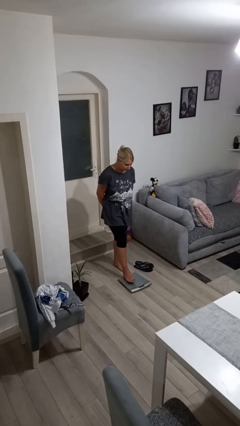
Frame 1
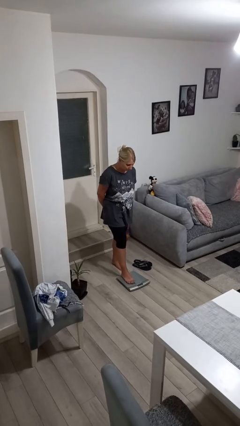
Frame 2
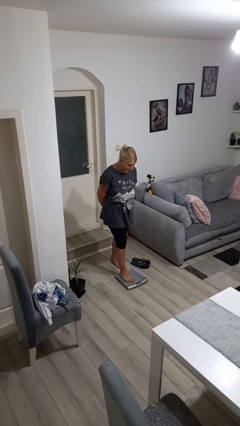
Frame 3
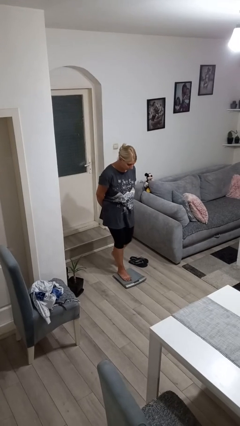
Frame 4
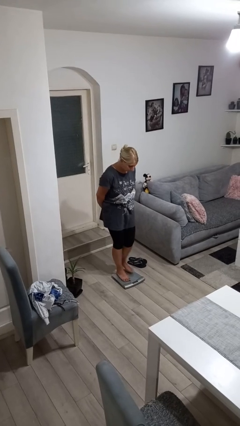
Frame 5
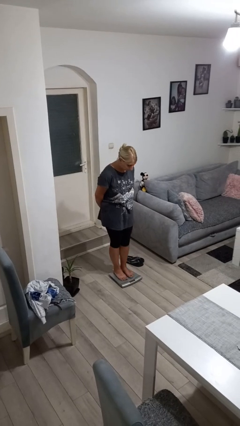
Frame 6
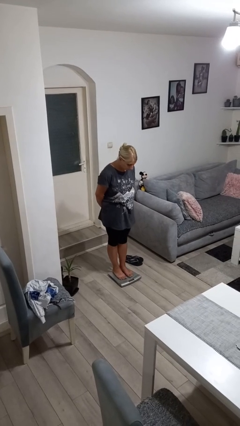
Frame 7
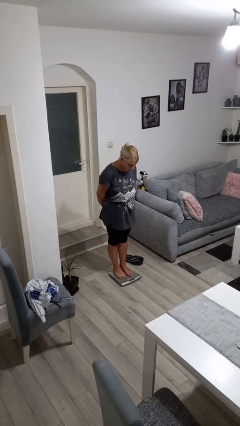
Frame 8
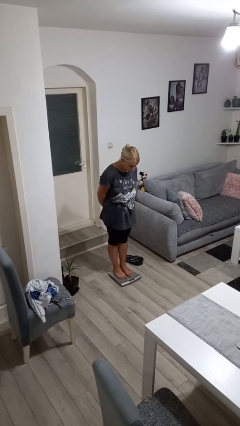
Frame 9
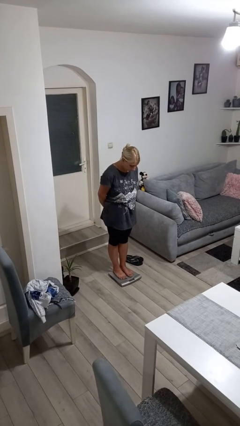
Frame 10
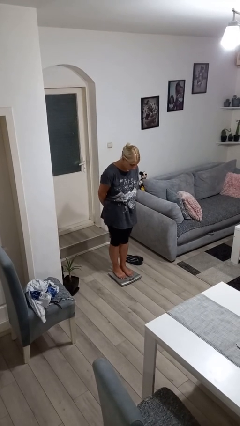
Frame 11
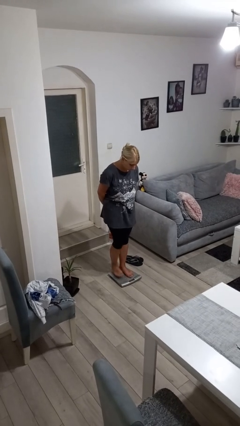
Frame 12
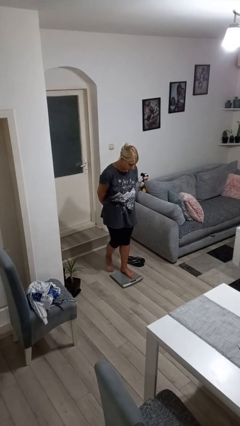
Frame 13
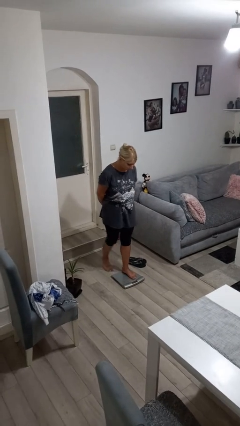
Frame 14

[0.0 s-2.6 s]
person uses bodyweight scale

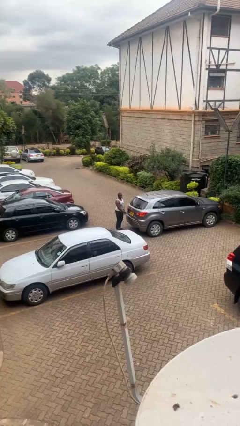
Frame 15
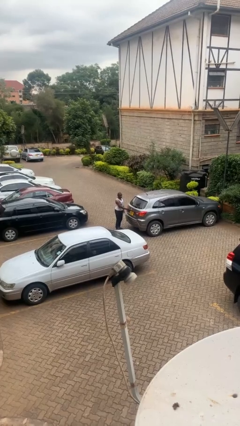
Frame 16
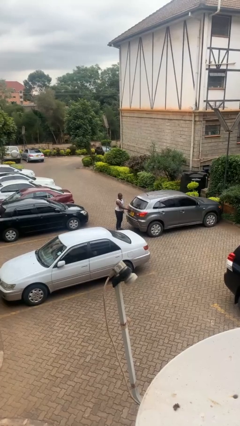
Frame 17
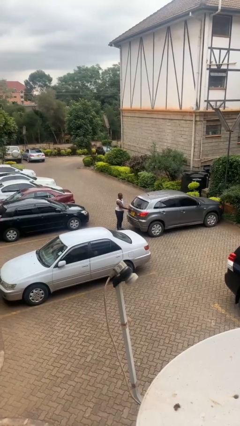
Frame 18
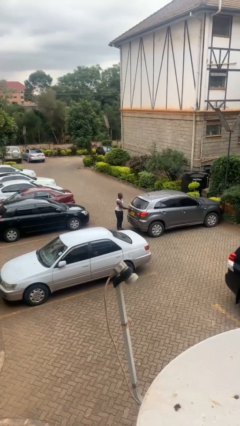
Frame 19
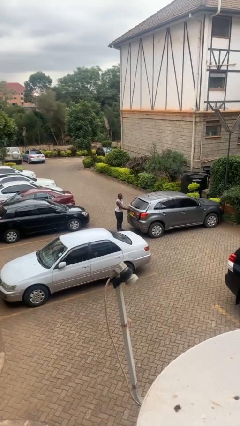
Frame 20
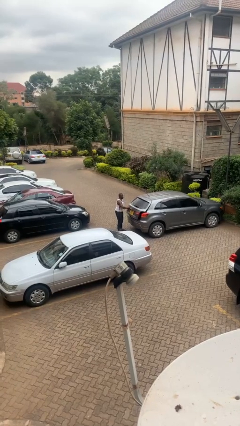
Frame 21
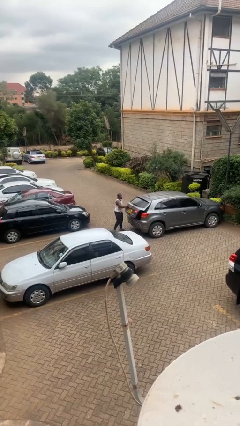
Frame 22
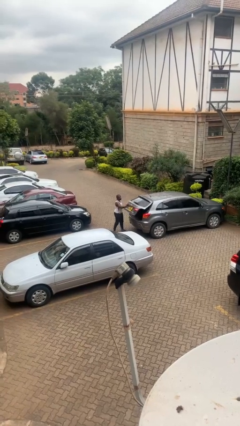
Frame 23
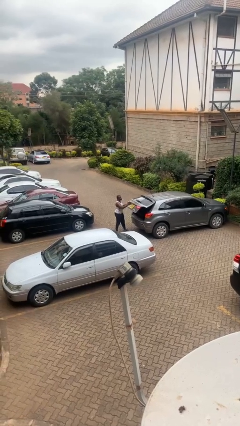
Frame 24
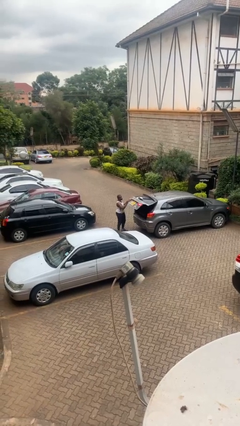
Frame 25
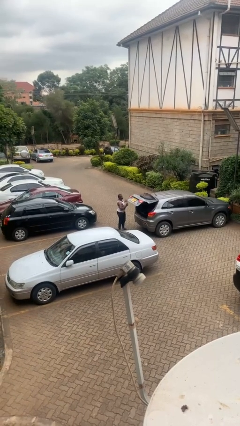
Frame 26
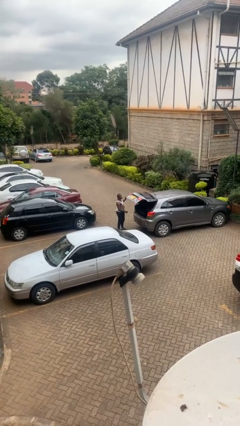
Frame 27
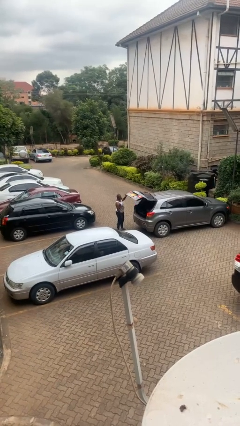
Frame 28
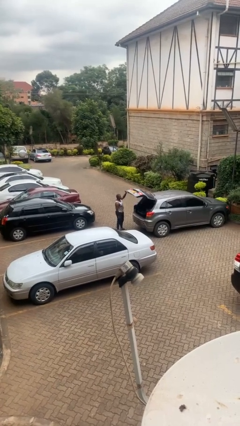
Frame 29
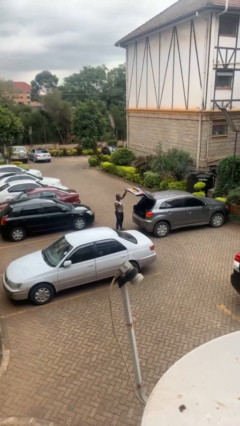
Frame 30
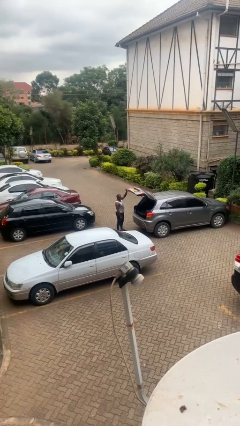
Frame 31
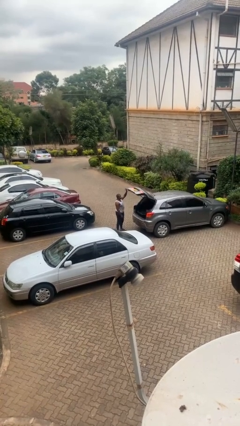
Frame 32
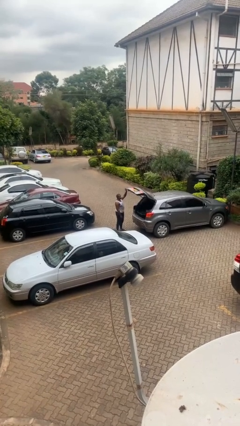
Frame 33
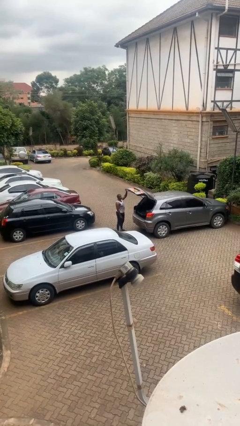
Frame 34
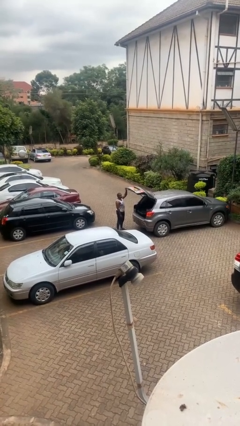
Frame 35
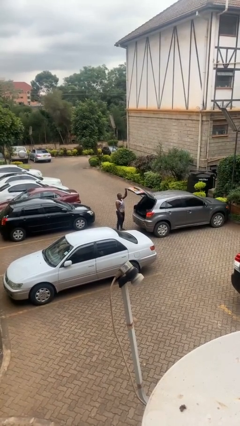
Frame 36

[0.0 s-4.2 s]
person opens car trunk

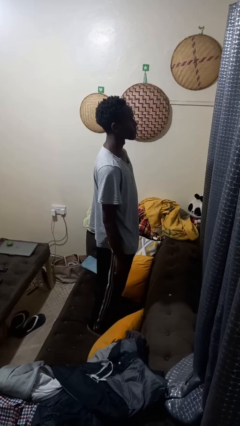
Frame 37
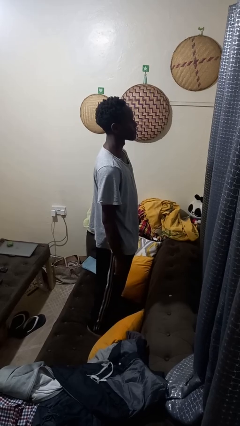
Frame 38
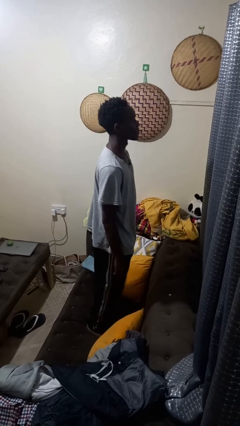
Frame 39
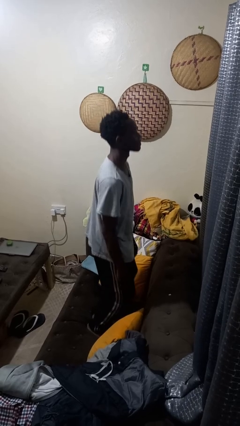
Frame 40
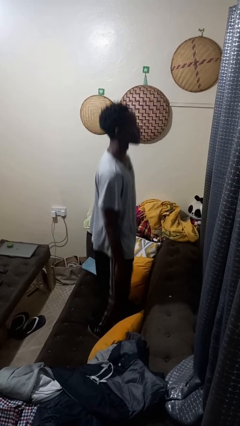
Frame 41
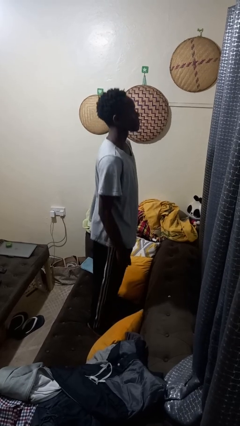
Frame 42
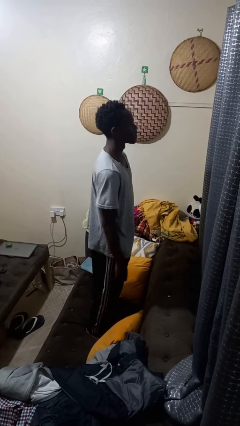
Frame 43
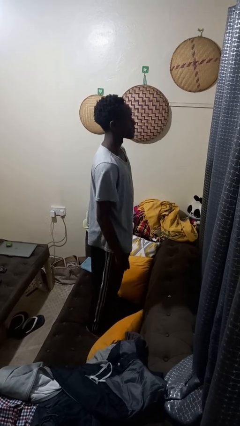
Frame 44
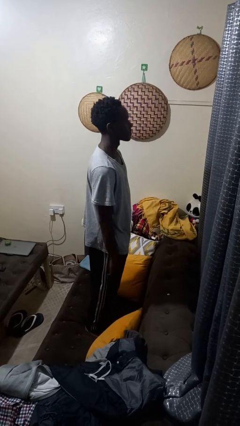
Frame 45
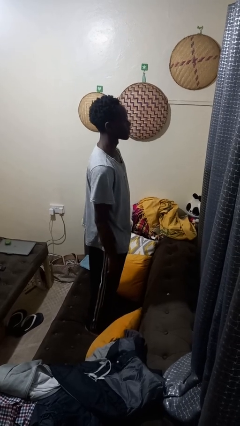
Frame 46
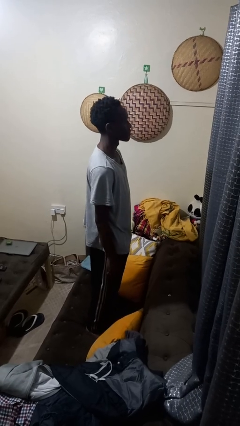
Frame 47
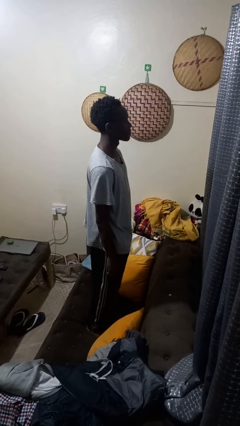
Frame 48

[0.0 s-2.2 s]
person jumps on couch

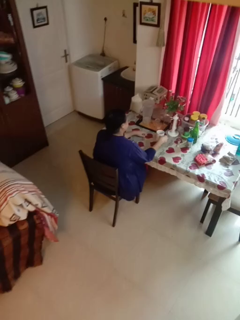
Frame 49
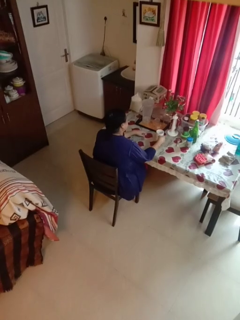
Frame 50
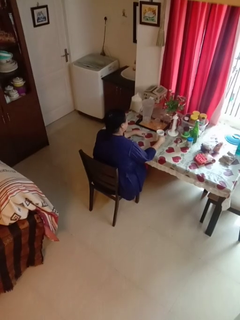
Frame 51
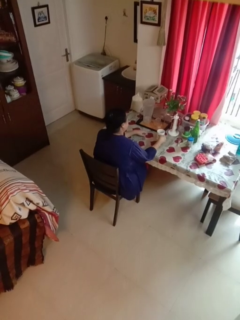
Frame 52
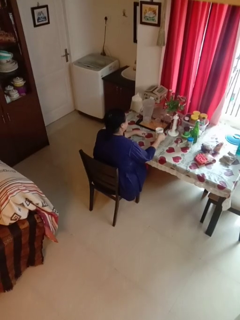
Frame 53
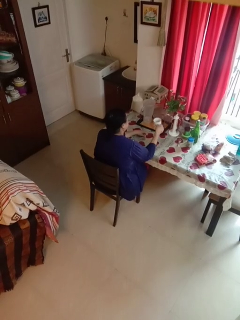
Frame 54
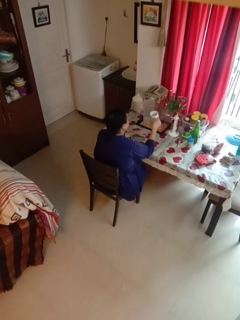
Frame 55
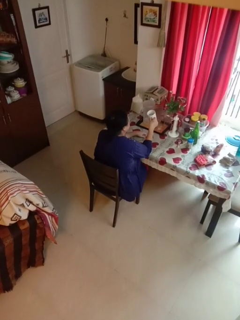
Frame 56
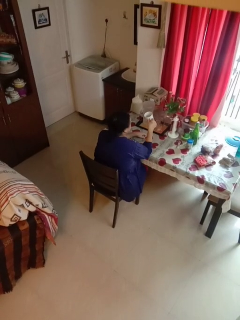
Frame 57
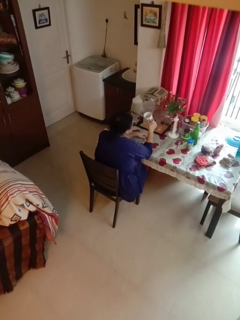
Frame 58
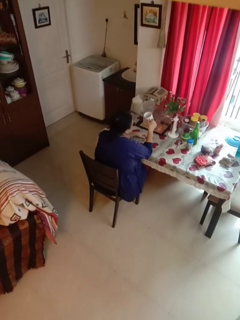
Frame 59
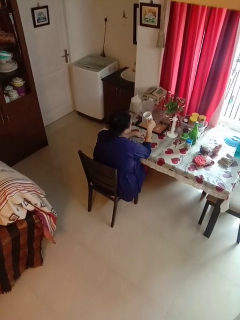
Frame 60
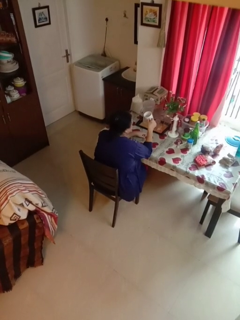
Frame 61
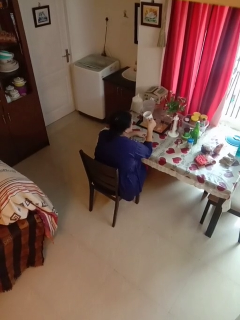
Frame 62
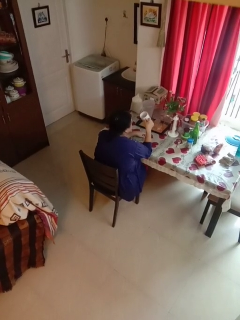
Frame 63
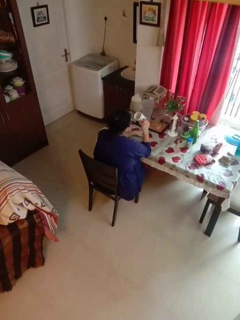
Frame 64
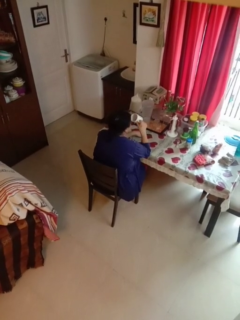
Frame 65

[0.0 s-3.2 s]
person picks up object from table

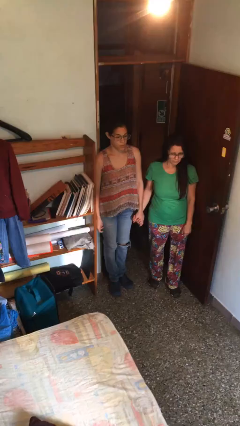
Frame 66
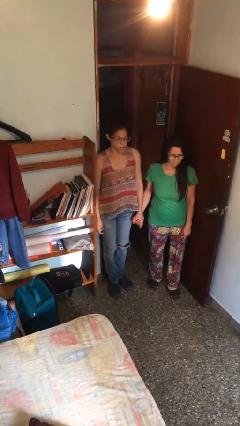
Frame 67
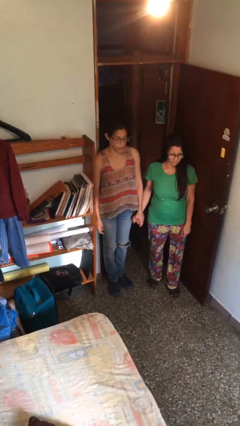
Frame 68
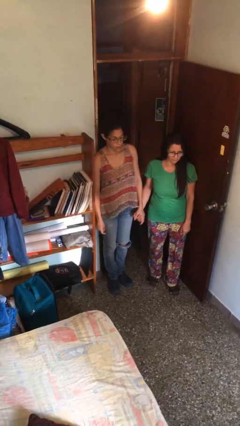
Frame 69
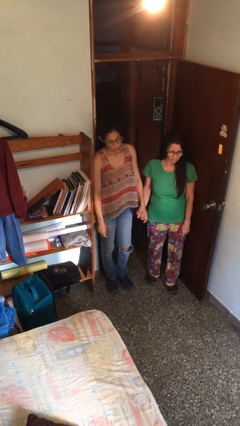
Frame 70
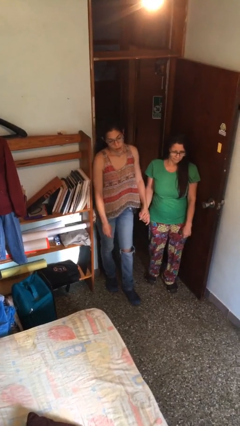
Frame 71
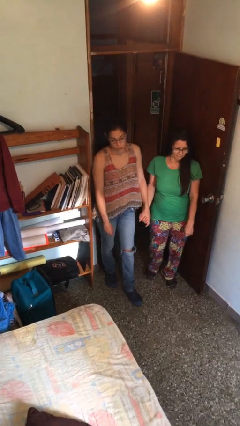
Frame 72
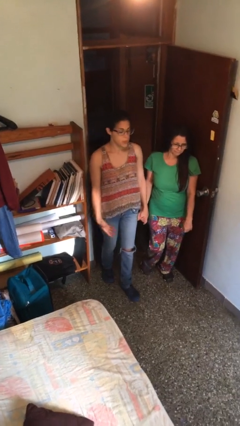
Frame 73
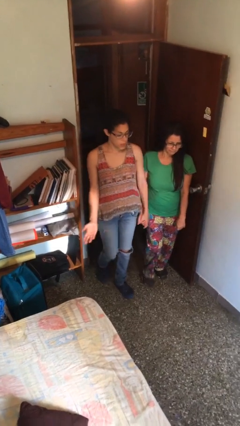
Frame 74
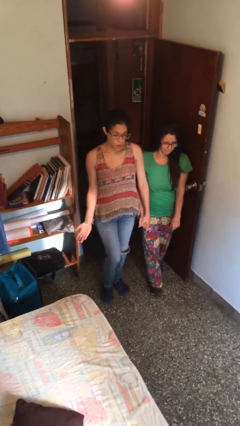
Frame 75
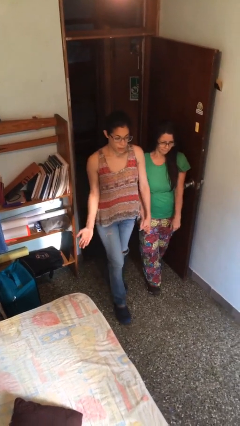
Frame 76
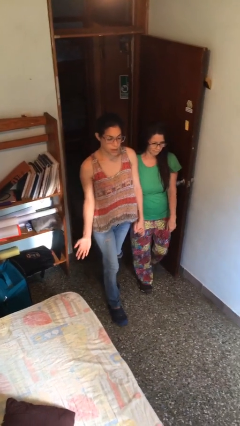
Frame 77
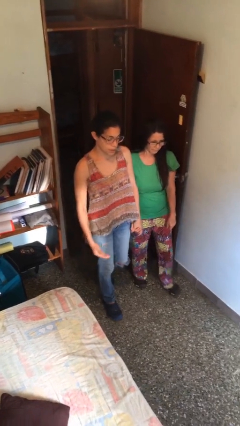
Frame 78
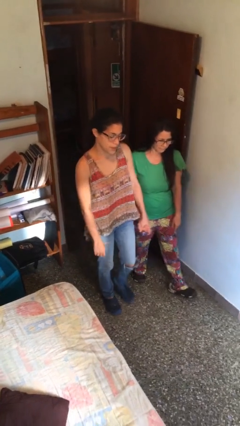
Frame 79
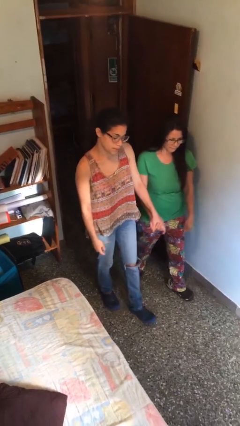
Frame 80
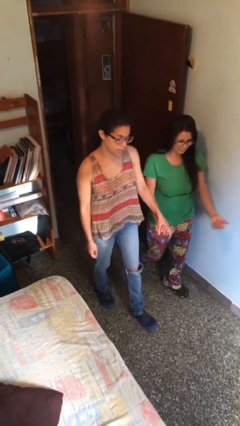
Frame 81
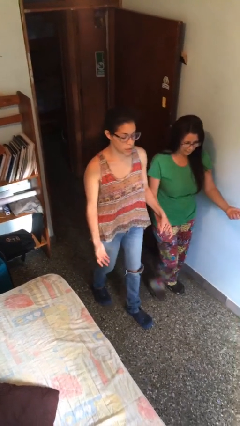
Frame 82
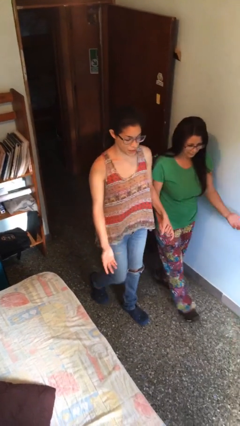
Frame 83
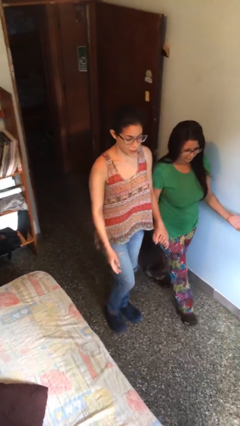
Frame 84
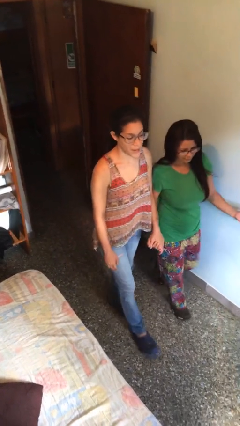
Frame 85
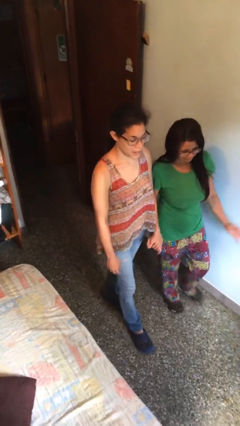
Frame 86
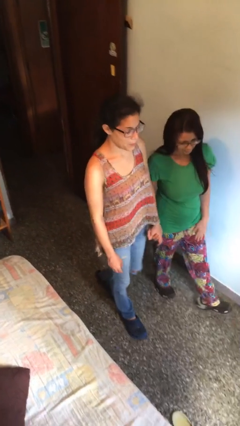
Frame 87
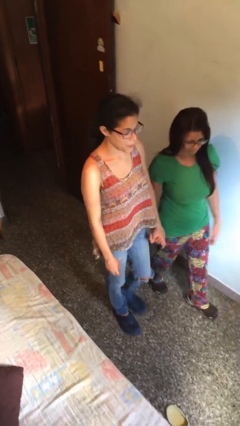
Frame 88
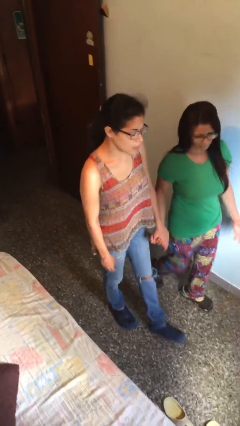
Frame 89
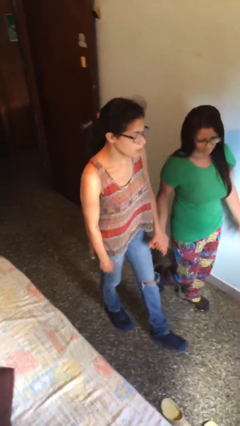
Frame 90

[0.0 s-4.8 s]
person holds hand

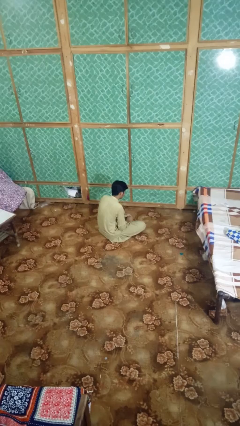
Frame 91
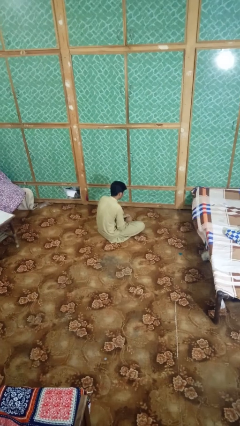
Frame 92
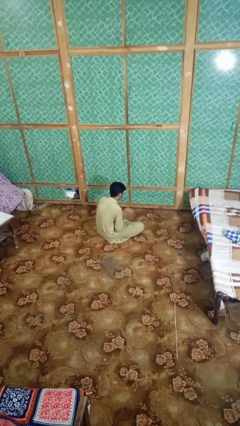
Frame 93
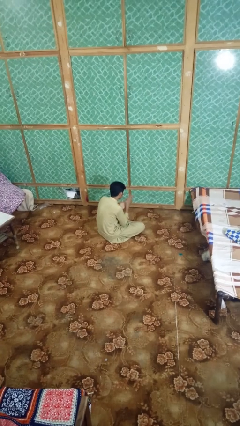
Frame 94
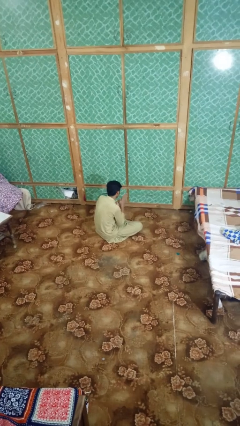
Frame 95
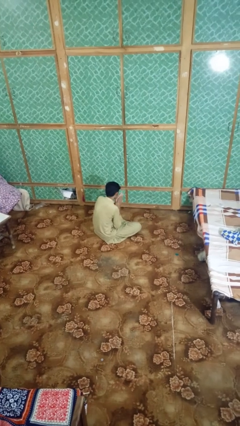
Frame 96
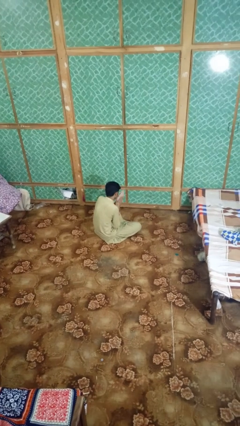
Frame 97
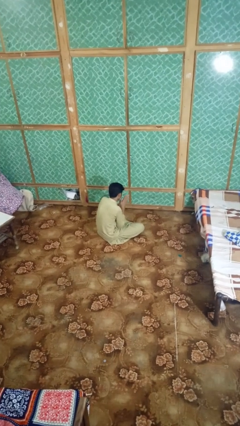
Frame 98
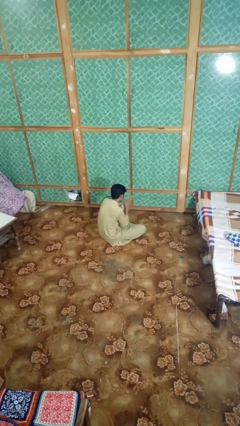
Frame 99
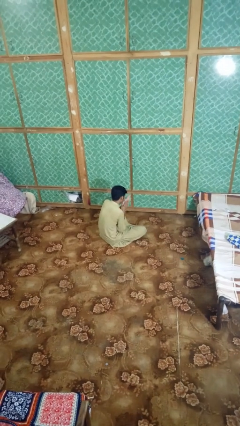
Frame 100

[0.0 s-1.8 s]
person blows into hands
